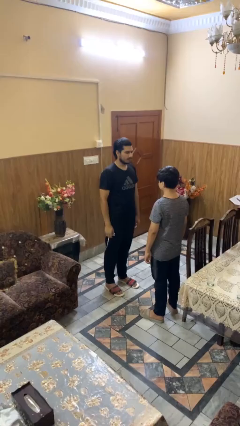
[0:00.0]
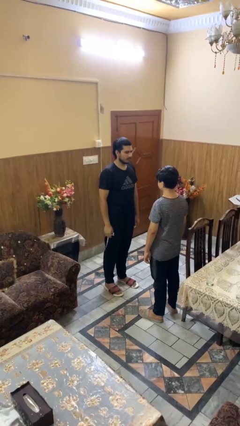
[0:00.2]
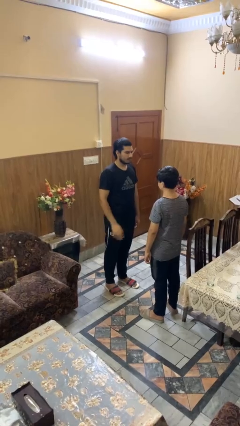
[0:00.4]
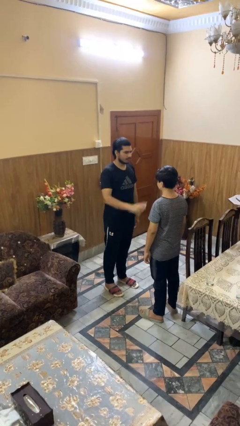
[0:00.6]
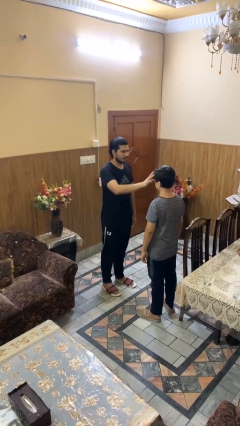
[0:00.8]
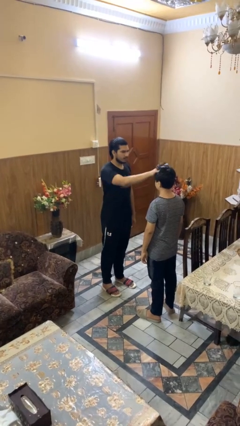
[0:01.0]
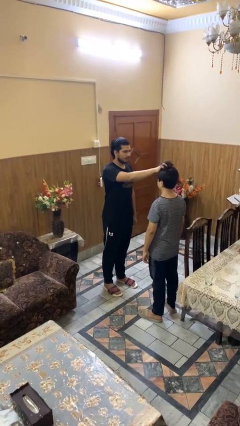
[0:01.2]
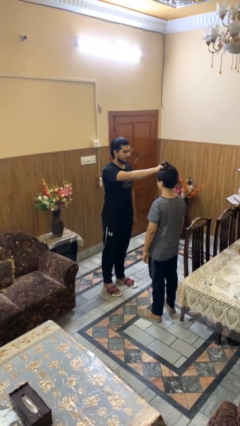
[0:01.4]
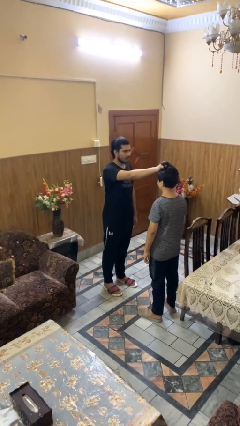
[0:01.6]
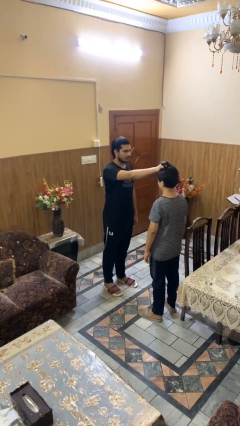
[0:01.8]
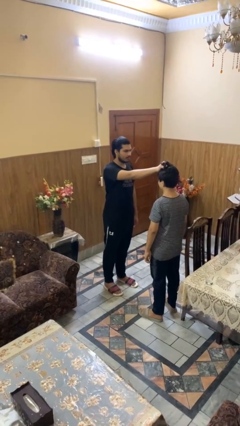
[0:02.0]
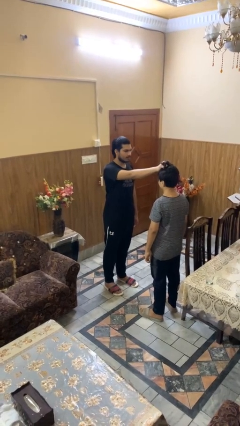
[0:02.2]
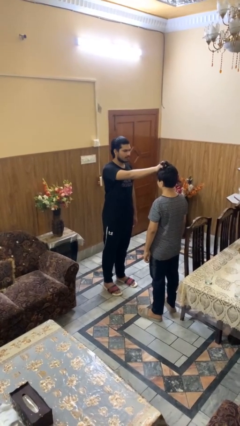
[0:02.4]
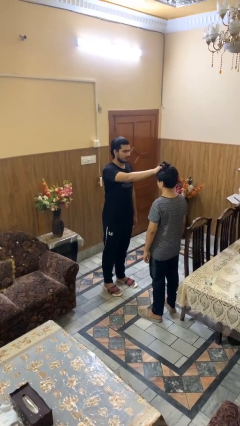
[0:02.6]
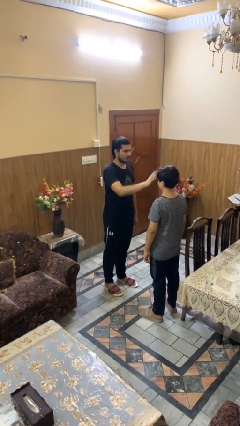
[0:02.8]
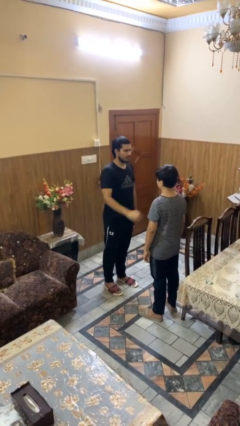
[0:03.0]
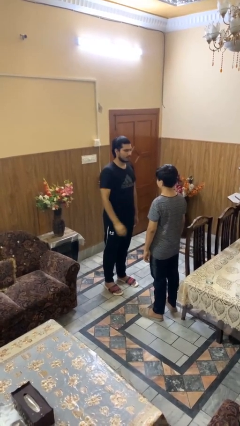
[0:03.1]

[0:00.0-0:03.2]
person grabs person by hair

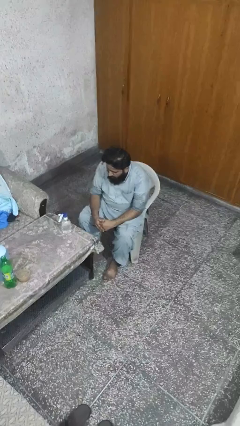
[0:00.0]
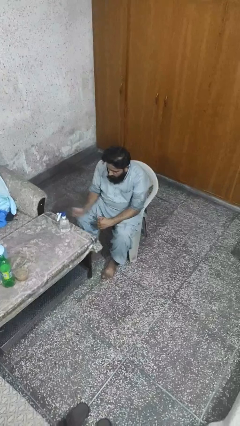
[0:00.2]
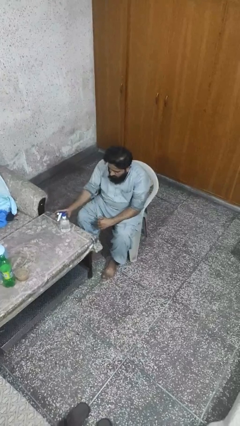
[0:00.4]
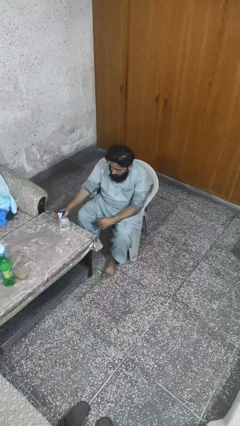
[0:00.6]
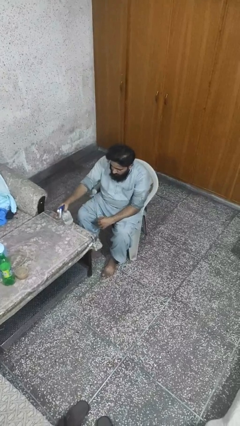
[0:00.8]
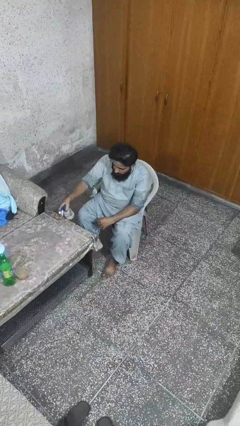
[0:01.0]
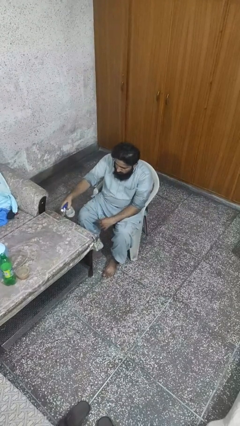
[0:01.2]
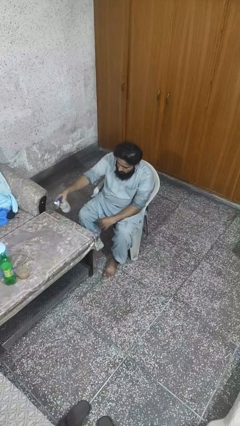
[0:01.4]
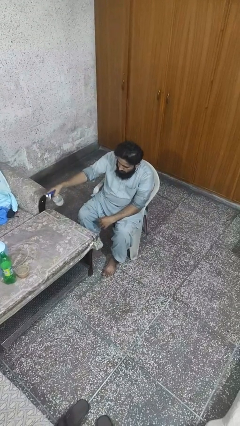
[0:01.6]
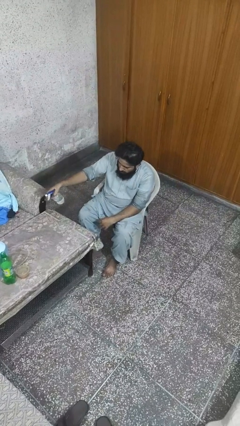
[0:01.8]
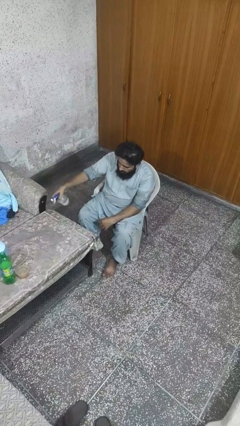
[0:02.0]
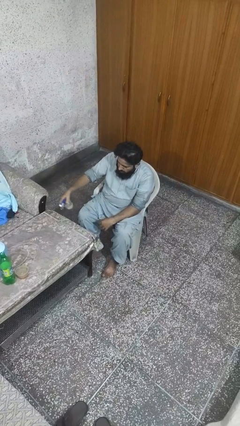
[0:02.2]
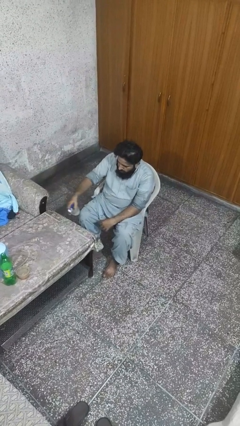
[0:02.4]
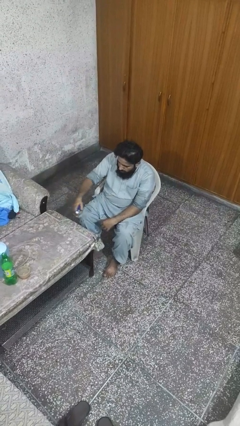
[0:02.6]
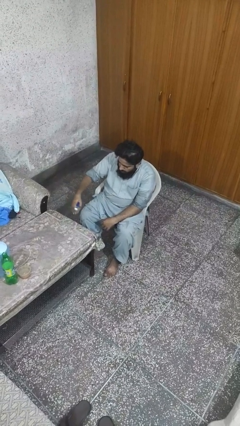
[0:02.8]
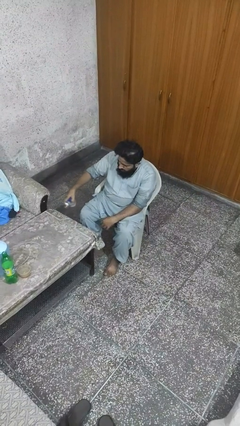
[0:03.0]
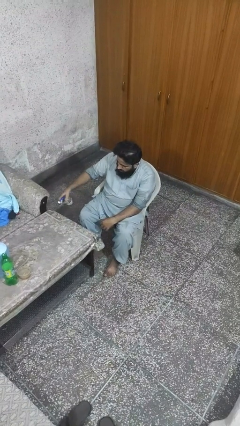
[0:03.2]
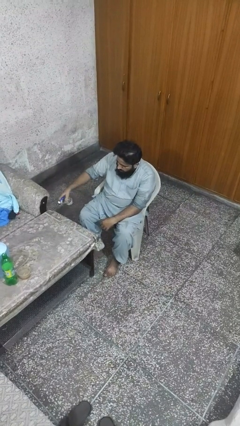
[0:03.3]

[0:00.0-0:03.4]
person sprays from bottle

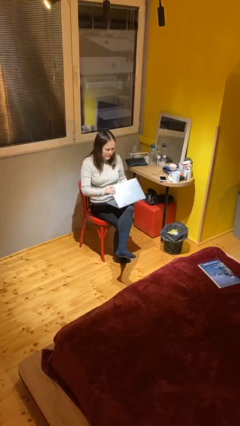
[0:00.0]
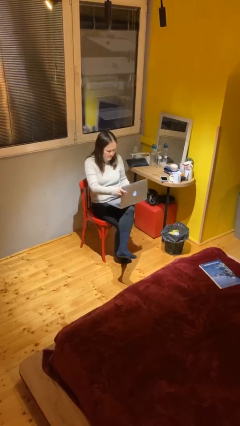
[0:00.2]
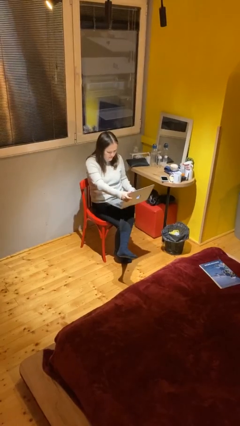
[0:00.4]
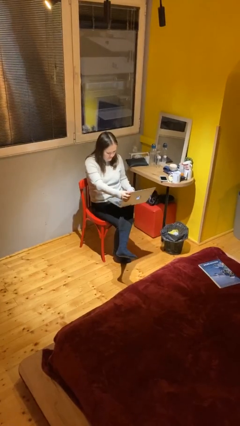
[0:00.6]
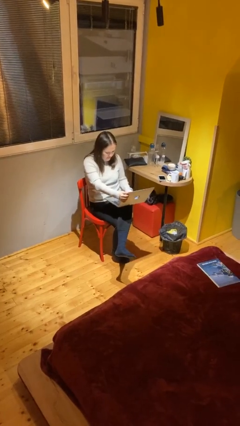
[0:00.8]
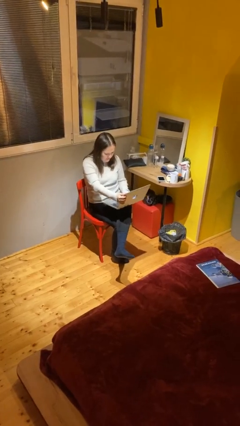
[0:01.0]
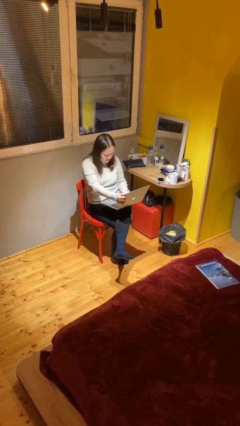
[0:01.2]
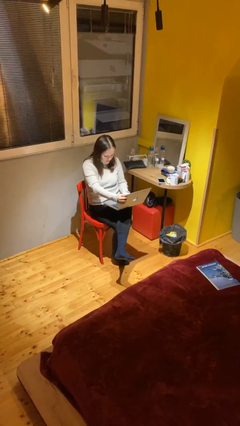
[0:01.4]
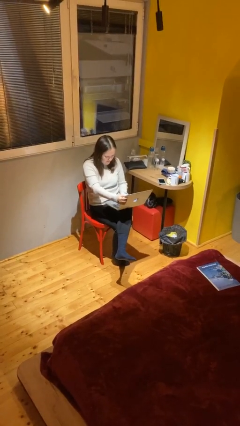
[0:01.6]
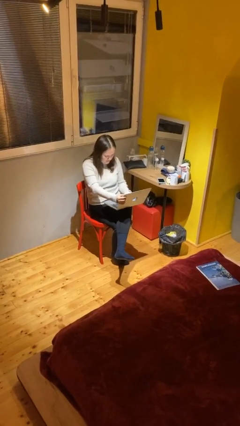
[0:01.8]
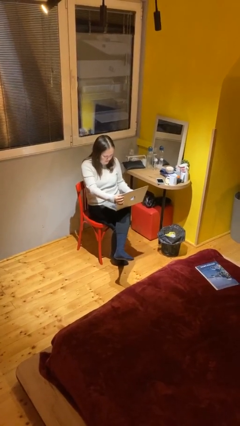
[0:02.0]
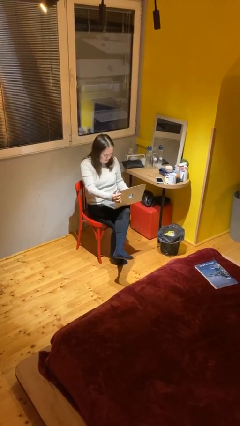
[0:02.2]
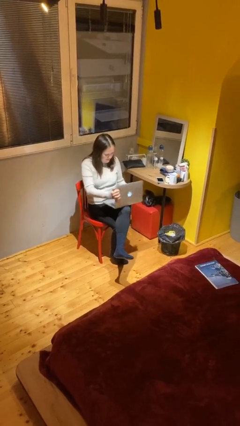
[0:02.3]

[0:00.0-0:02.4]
person interacts with laptop

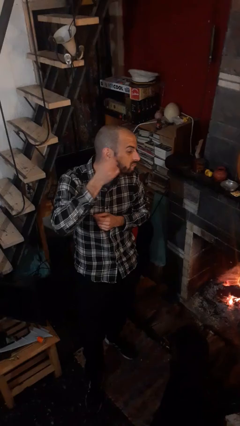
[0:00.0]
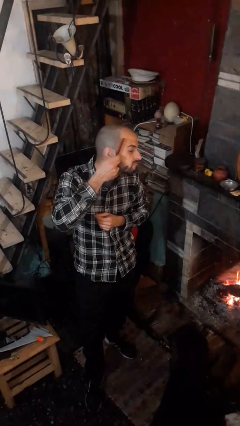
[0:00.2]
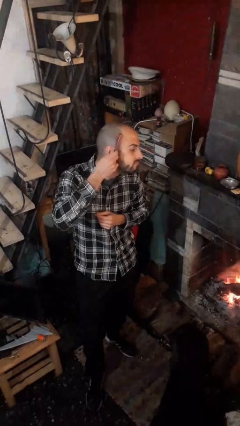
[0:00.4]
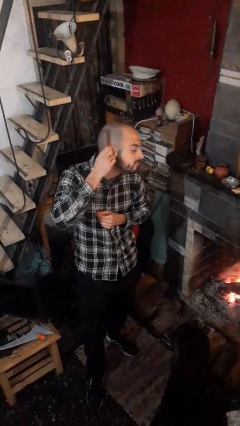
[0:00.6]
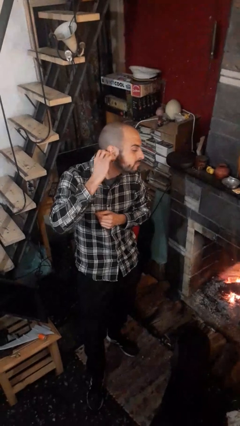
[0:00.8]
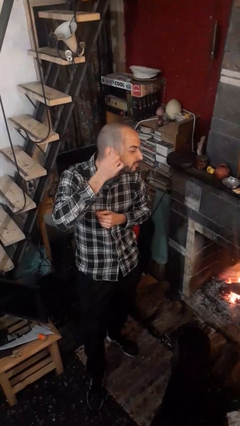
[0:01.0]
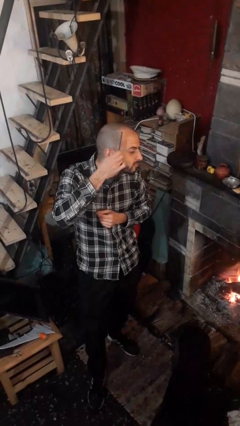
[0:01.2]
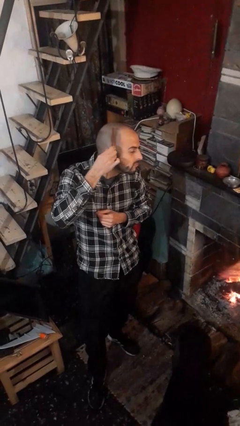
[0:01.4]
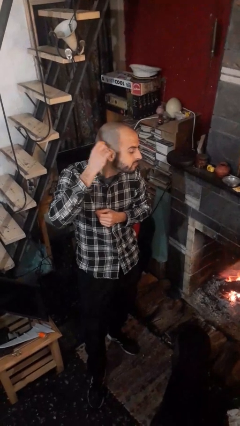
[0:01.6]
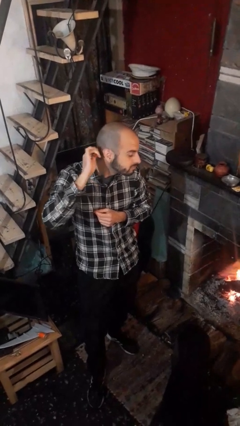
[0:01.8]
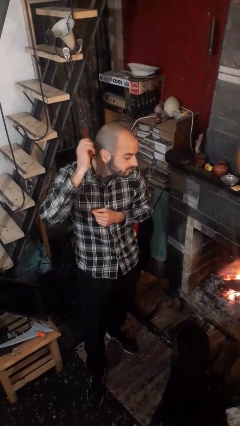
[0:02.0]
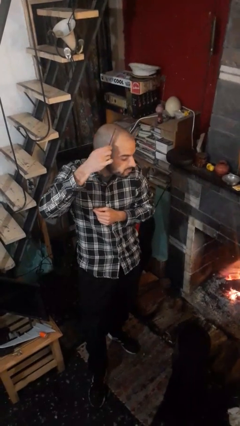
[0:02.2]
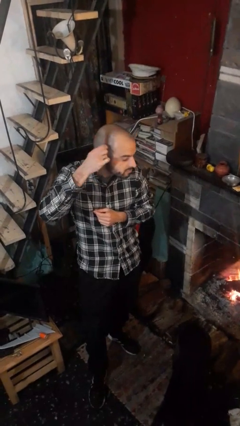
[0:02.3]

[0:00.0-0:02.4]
person brushes hair

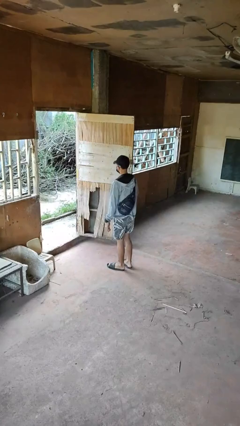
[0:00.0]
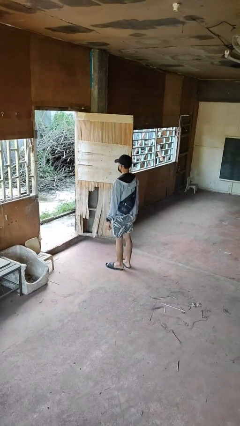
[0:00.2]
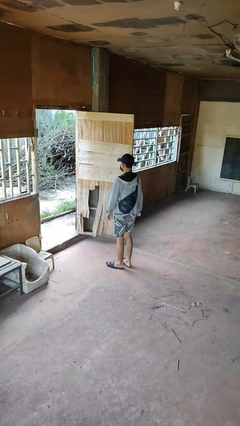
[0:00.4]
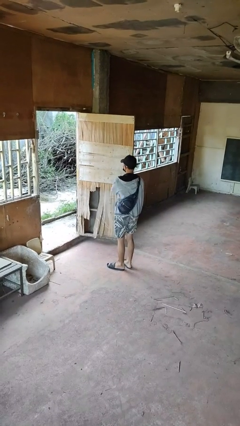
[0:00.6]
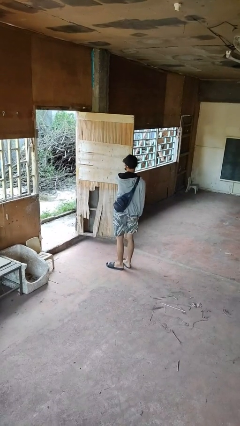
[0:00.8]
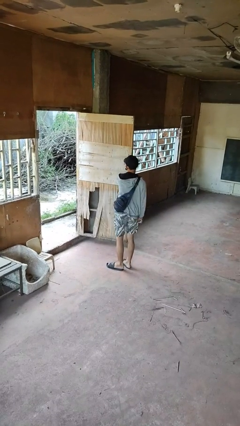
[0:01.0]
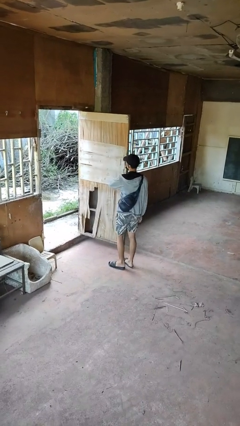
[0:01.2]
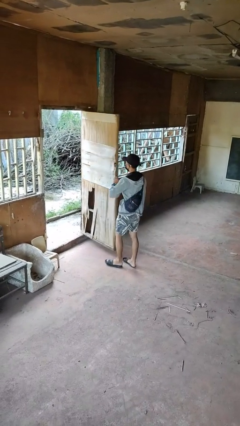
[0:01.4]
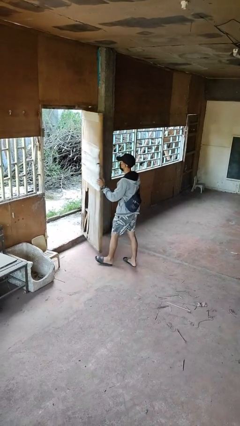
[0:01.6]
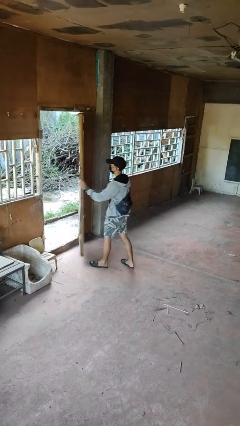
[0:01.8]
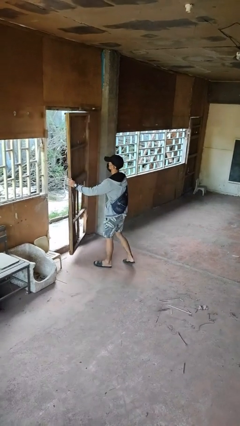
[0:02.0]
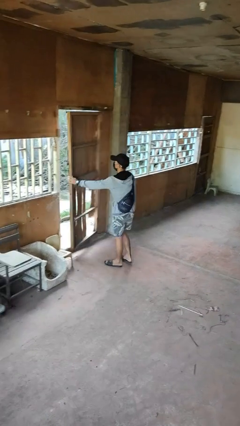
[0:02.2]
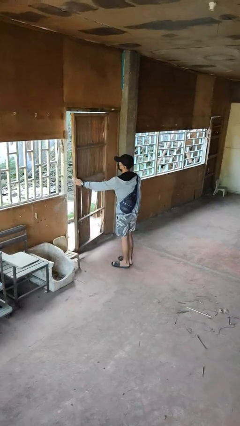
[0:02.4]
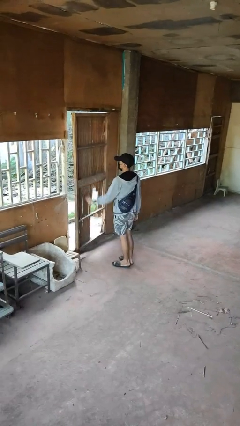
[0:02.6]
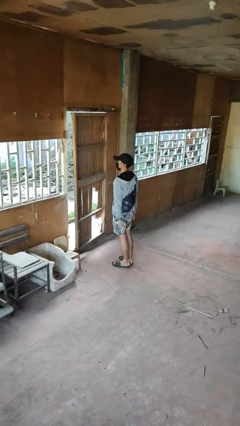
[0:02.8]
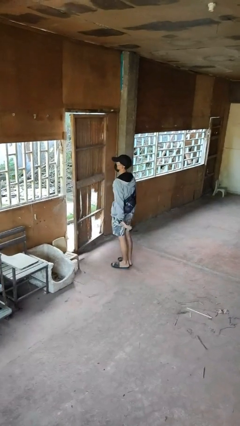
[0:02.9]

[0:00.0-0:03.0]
person closes facility door

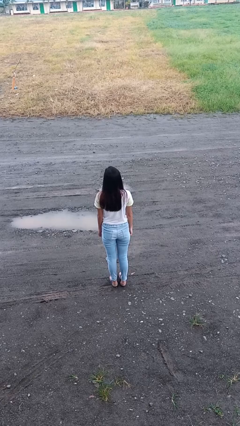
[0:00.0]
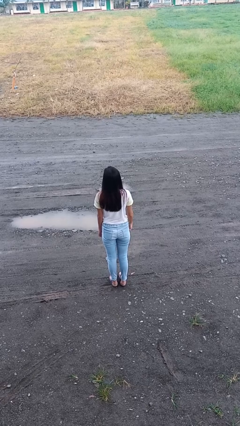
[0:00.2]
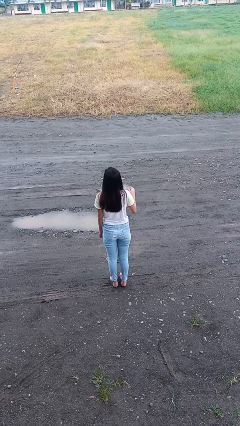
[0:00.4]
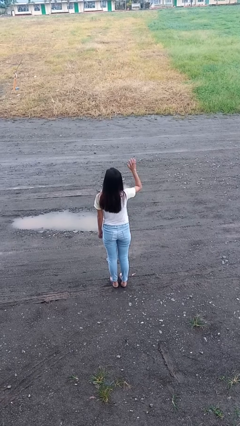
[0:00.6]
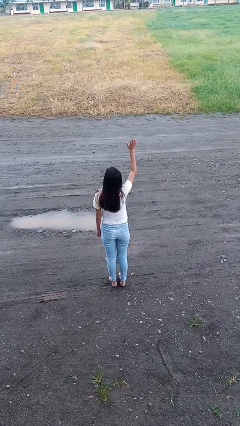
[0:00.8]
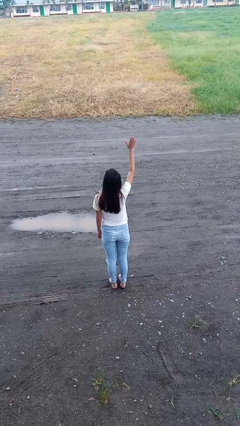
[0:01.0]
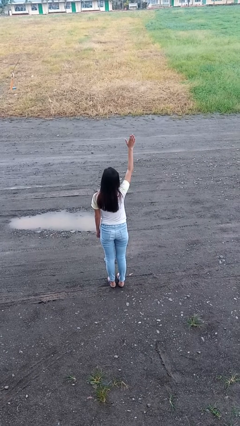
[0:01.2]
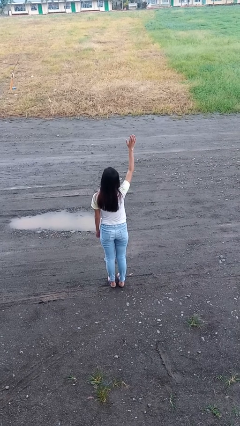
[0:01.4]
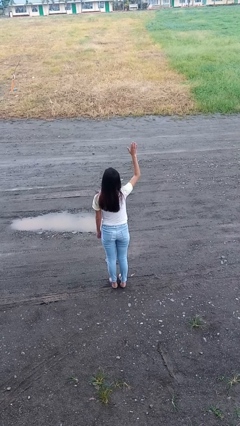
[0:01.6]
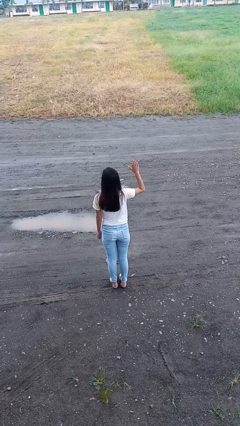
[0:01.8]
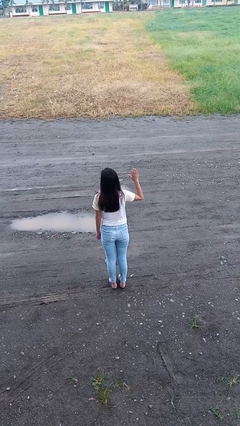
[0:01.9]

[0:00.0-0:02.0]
person gestures raise hand

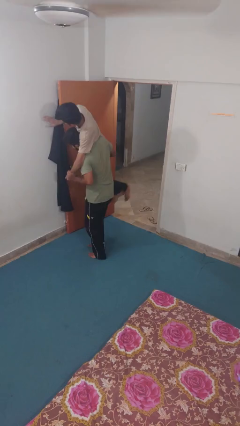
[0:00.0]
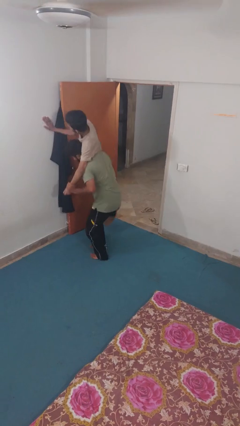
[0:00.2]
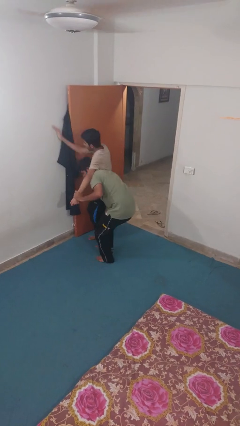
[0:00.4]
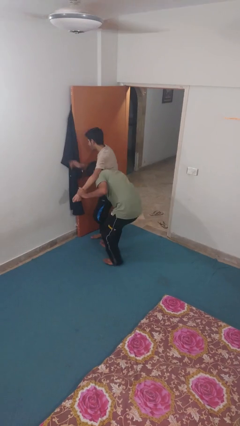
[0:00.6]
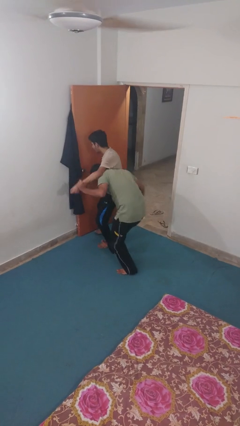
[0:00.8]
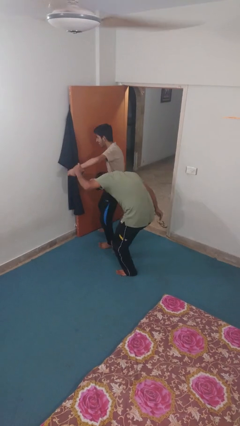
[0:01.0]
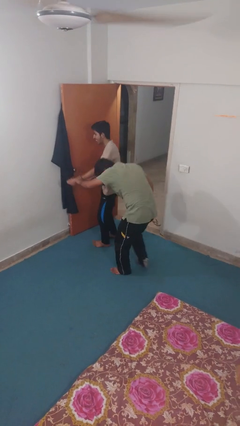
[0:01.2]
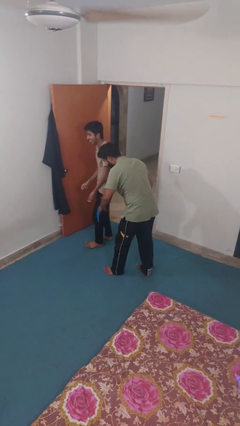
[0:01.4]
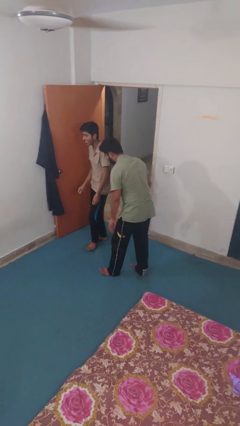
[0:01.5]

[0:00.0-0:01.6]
person puts down person
